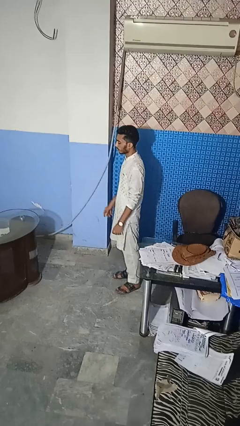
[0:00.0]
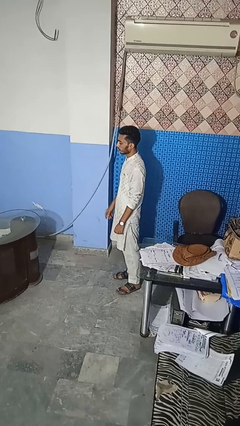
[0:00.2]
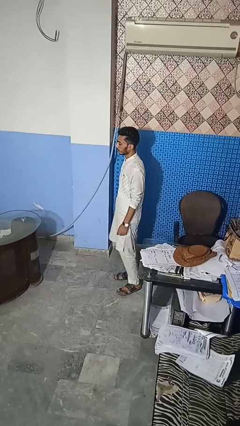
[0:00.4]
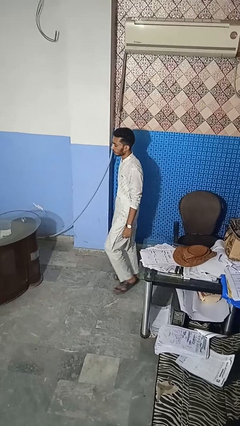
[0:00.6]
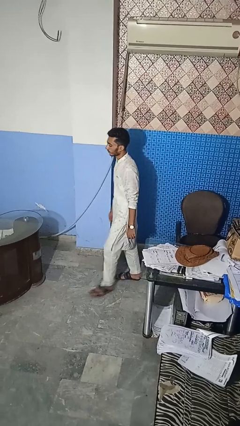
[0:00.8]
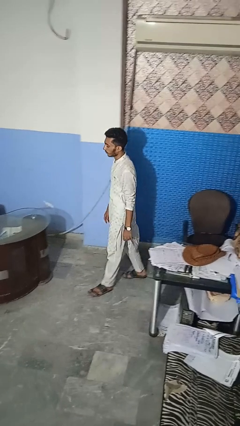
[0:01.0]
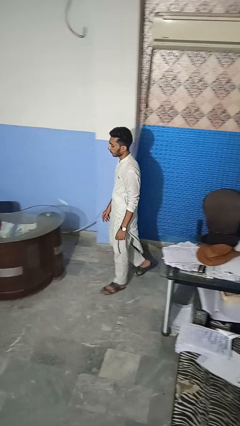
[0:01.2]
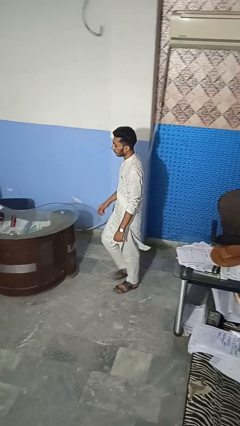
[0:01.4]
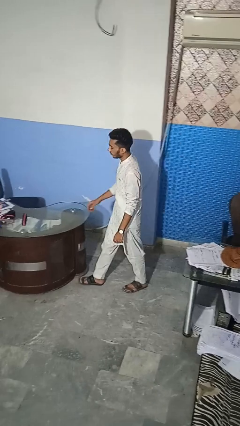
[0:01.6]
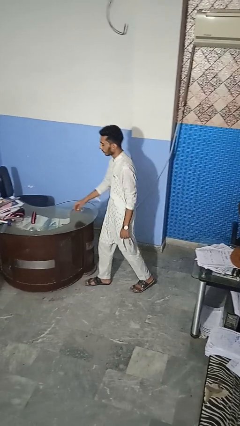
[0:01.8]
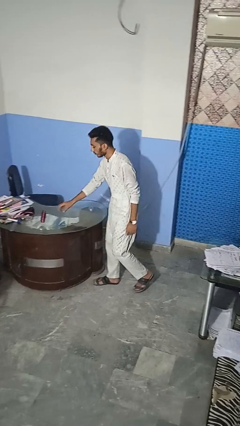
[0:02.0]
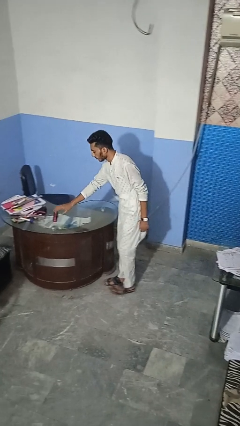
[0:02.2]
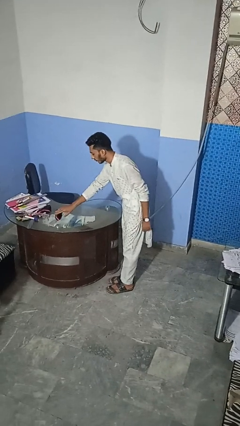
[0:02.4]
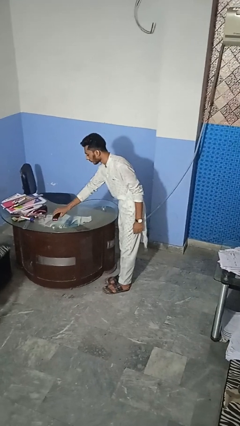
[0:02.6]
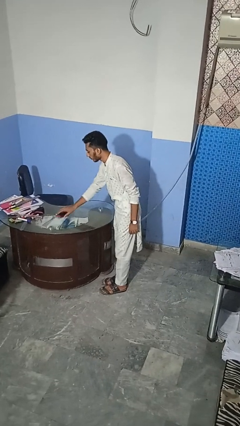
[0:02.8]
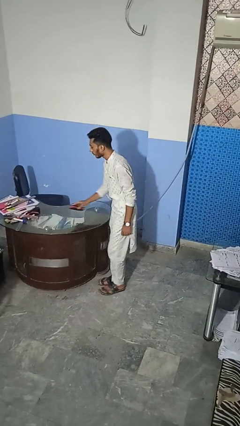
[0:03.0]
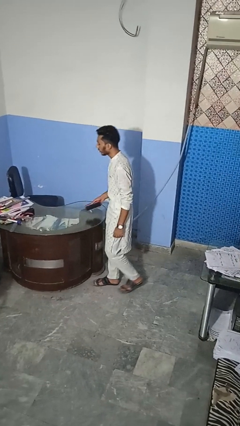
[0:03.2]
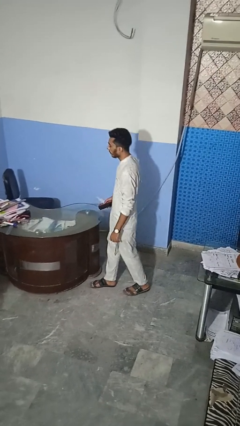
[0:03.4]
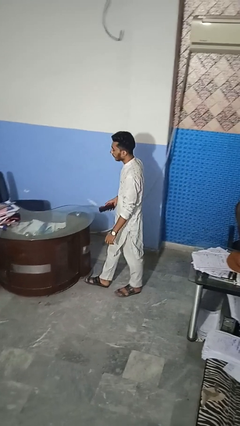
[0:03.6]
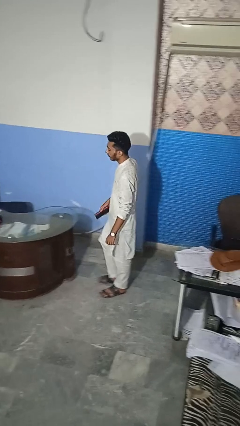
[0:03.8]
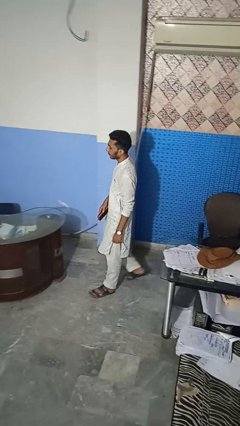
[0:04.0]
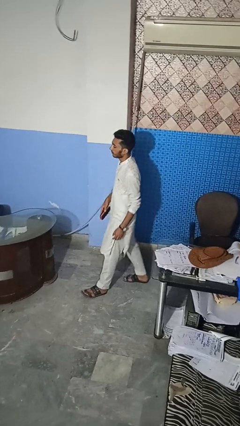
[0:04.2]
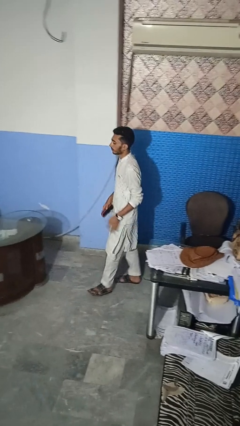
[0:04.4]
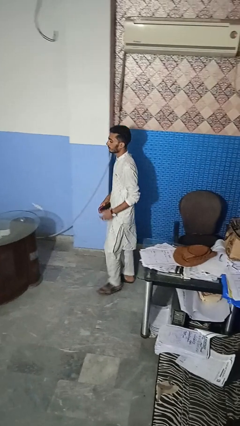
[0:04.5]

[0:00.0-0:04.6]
person picks up object from table

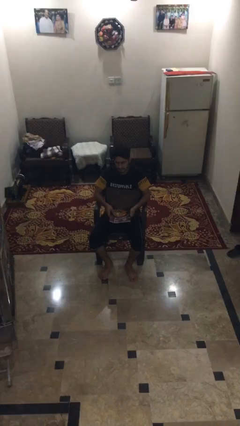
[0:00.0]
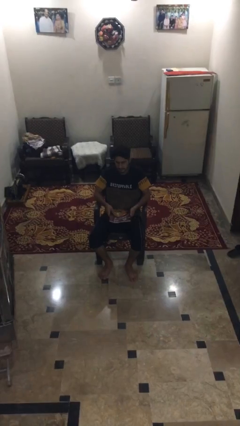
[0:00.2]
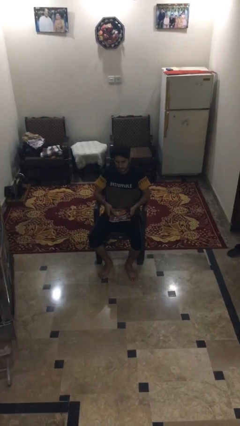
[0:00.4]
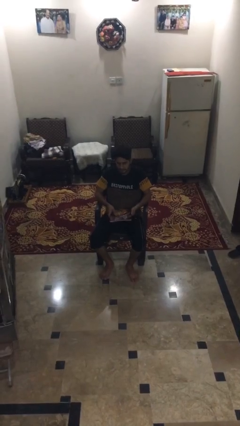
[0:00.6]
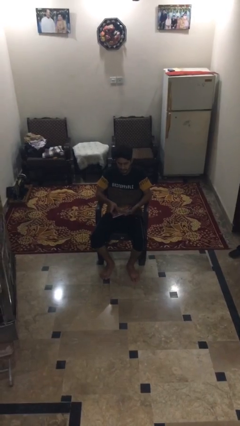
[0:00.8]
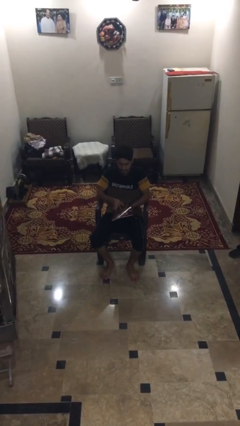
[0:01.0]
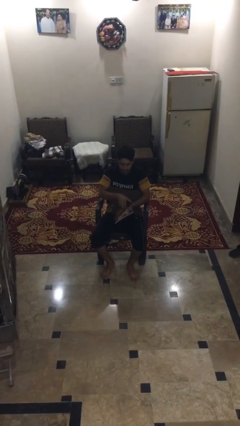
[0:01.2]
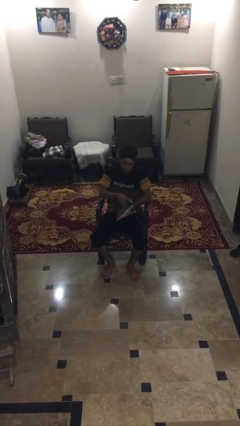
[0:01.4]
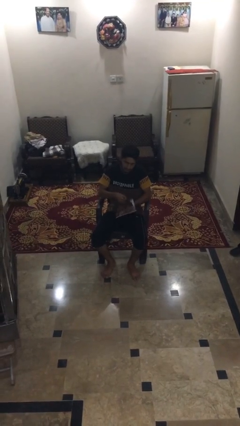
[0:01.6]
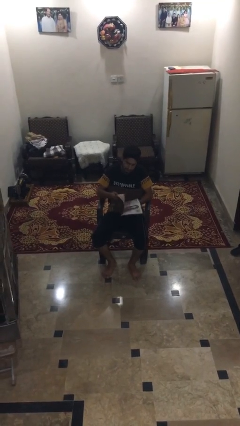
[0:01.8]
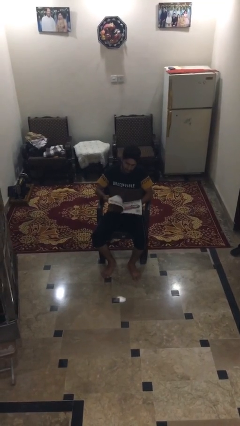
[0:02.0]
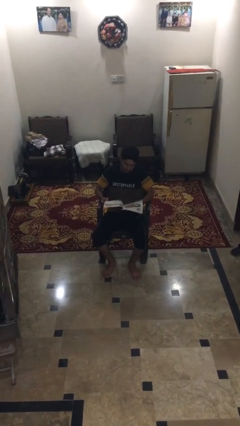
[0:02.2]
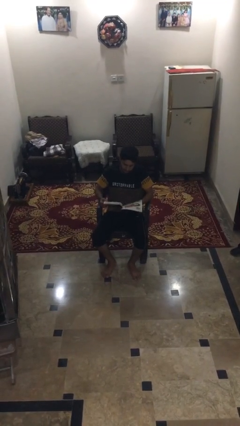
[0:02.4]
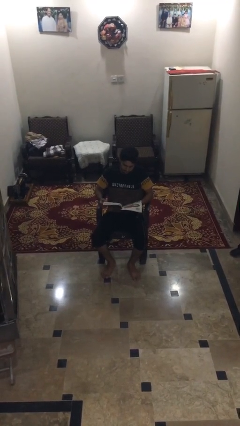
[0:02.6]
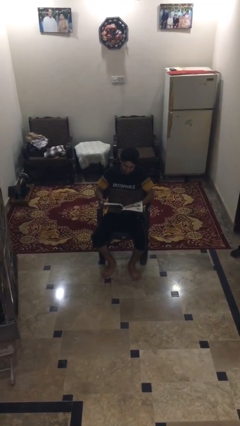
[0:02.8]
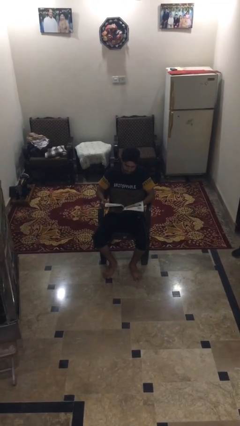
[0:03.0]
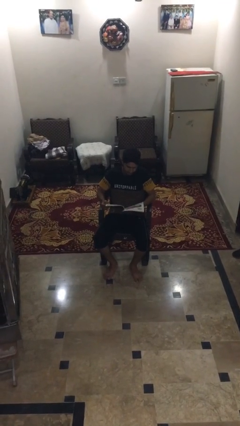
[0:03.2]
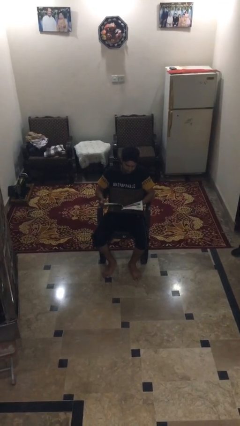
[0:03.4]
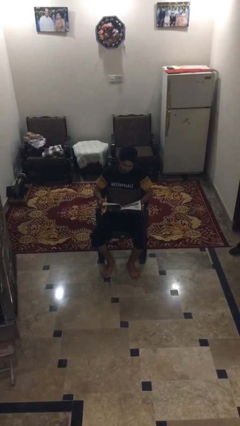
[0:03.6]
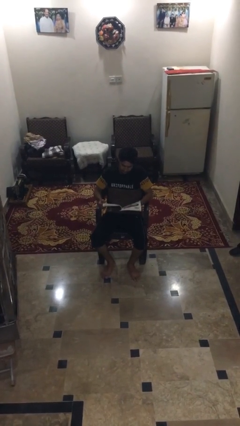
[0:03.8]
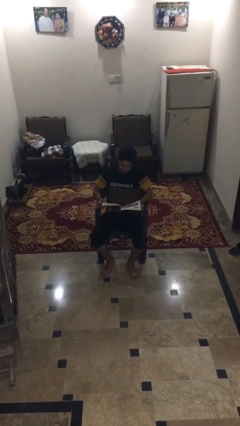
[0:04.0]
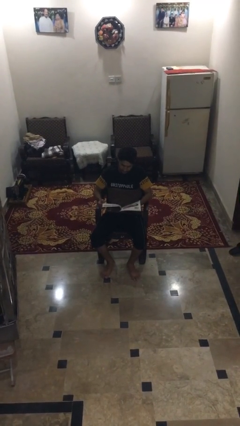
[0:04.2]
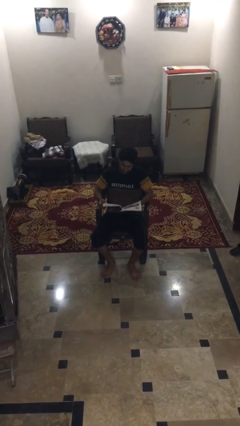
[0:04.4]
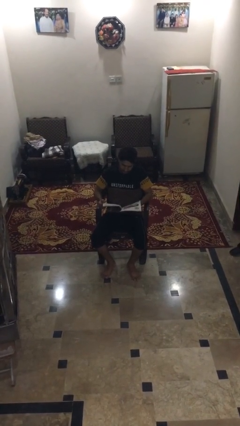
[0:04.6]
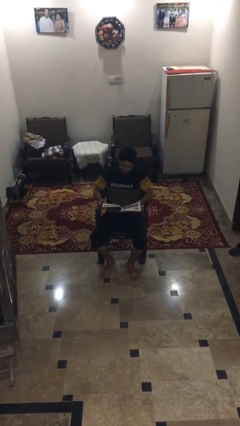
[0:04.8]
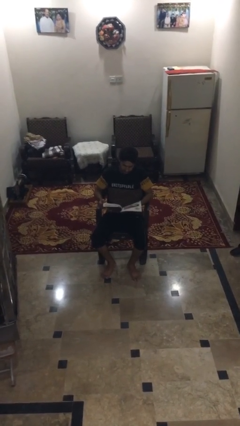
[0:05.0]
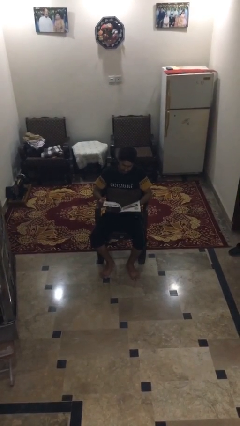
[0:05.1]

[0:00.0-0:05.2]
person reads magazine

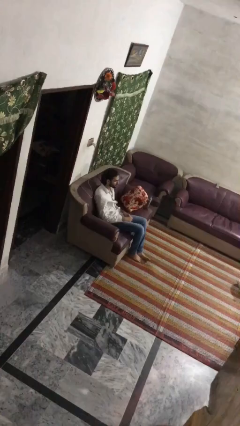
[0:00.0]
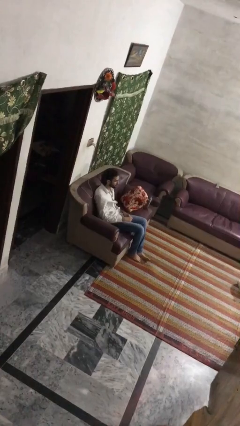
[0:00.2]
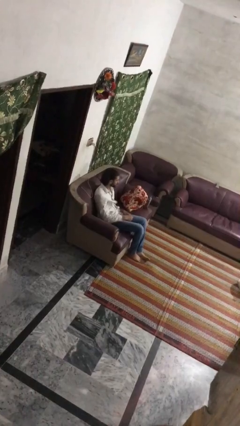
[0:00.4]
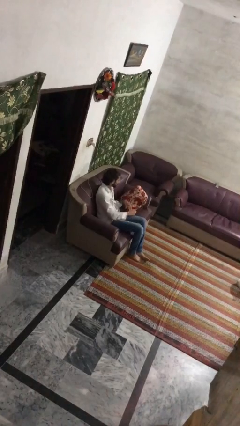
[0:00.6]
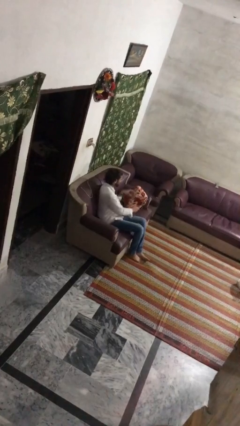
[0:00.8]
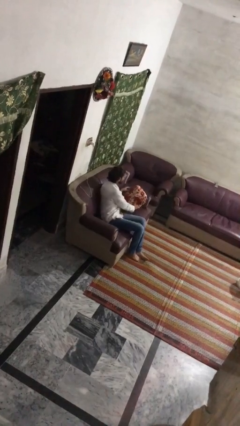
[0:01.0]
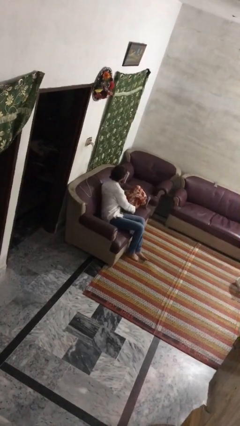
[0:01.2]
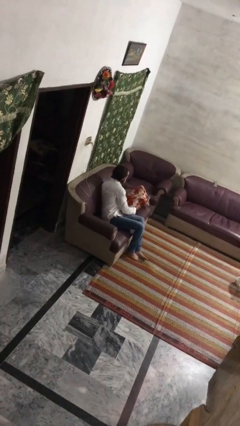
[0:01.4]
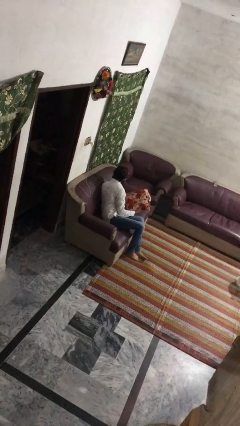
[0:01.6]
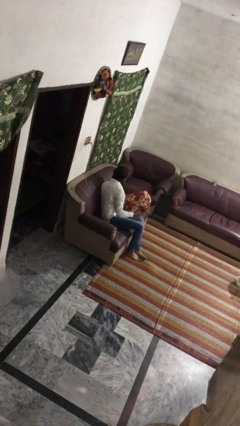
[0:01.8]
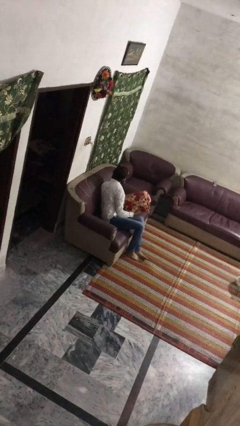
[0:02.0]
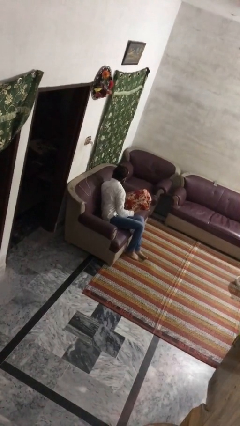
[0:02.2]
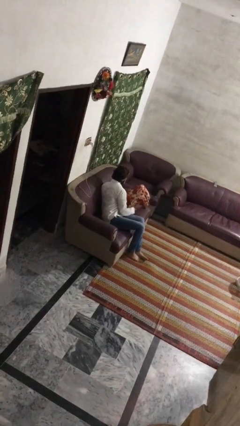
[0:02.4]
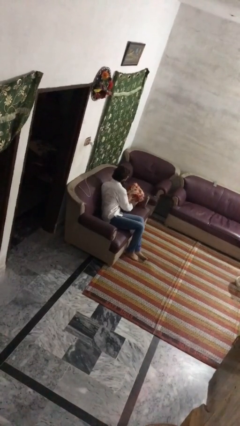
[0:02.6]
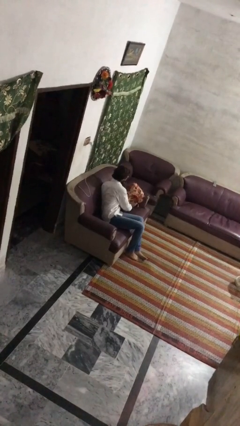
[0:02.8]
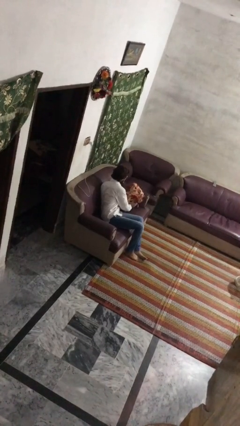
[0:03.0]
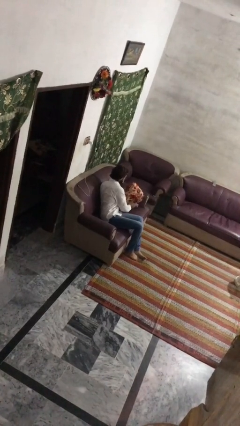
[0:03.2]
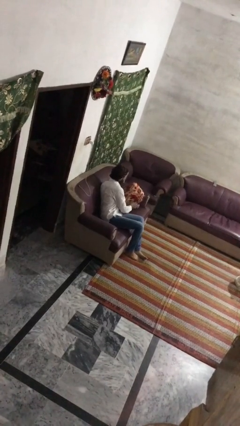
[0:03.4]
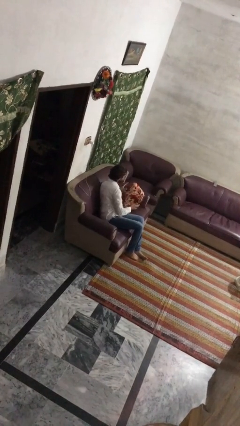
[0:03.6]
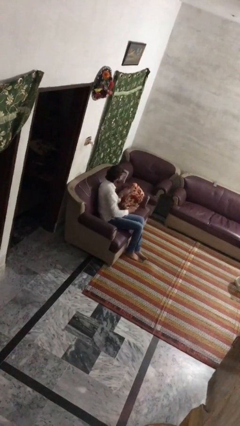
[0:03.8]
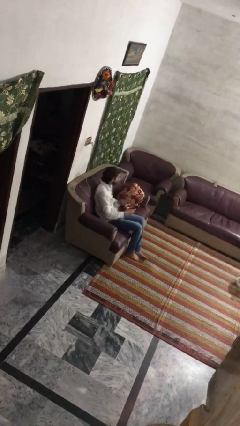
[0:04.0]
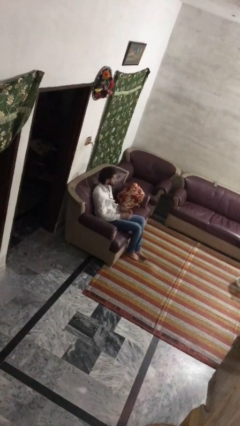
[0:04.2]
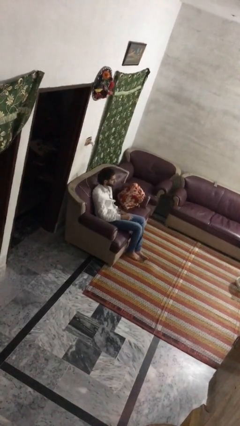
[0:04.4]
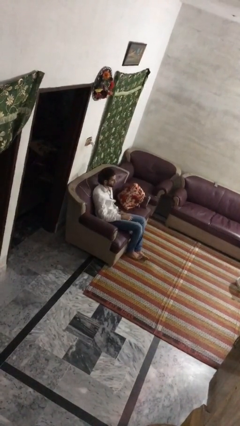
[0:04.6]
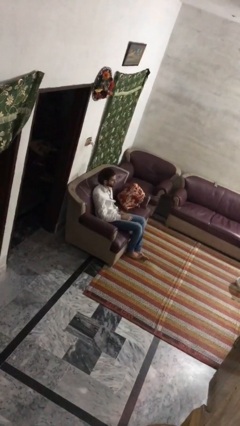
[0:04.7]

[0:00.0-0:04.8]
person searches in couch

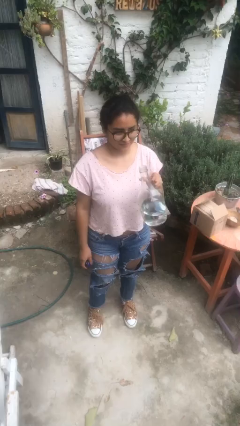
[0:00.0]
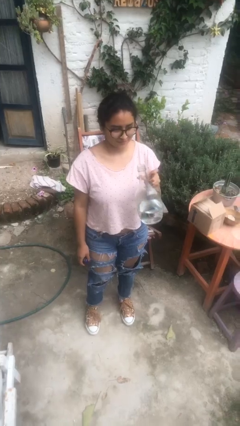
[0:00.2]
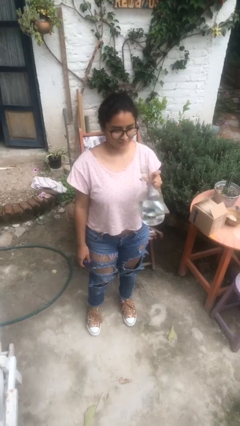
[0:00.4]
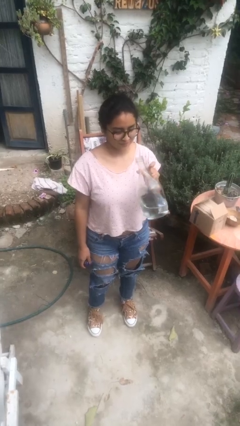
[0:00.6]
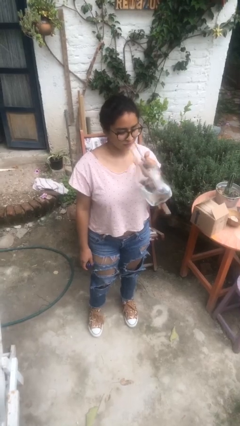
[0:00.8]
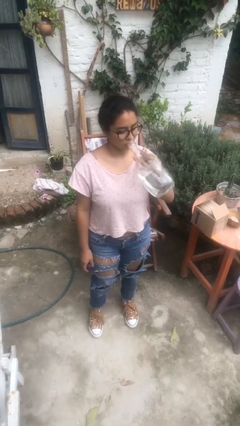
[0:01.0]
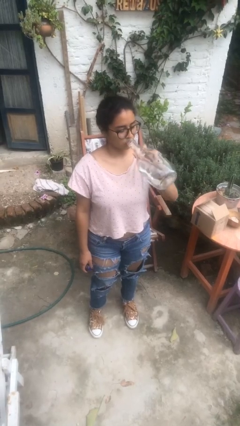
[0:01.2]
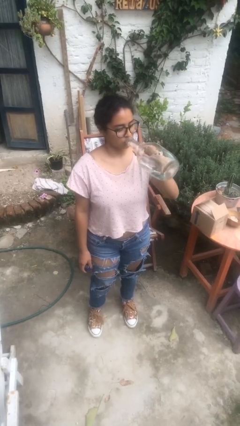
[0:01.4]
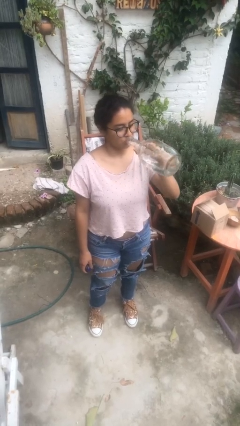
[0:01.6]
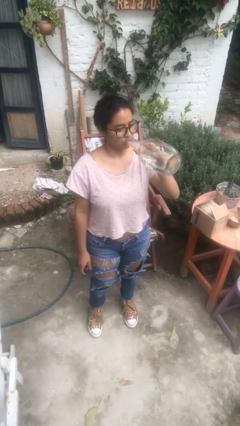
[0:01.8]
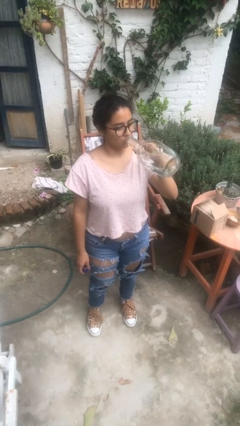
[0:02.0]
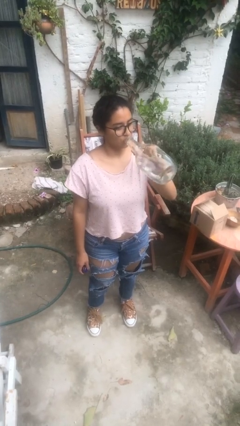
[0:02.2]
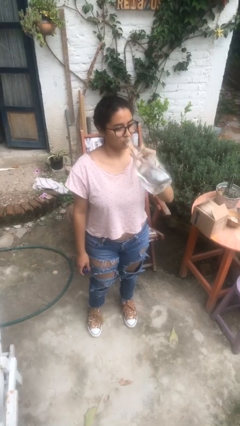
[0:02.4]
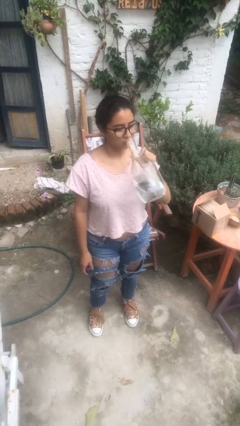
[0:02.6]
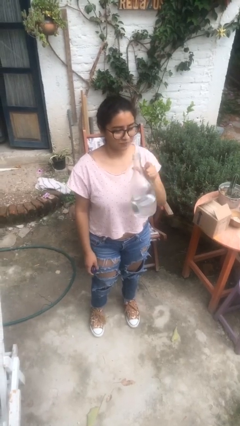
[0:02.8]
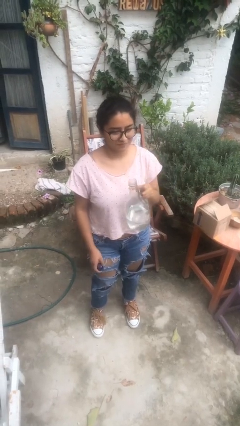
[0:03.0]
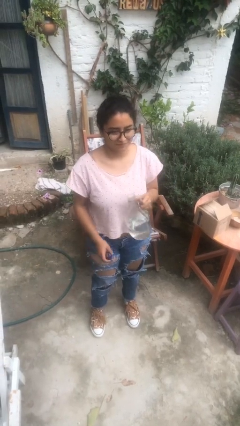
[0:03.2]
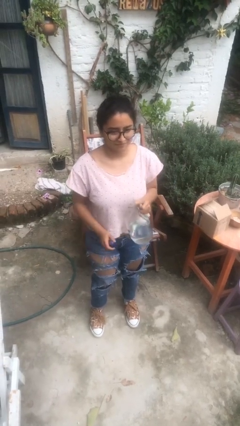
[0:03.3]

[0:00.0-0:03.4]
person drinks from bottle
